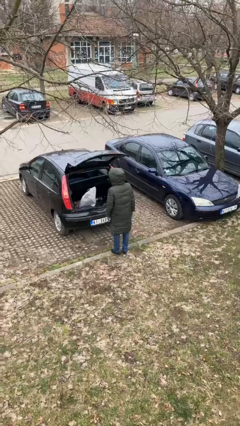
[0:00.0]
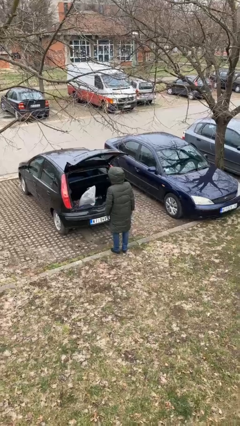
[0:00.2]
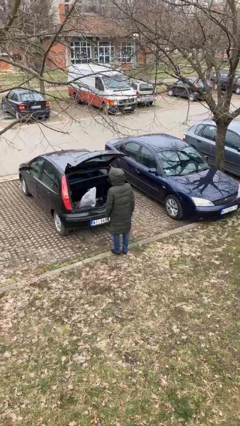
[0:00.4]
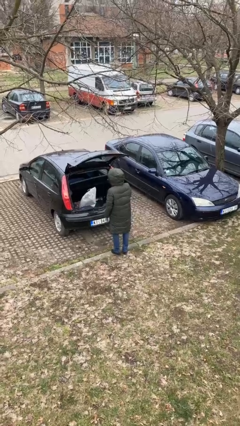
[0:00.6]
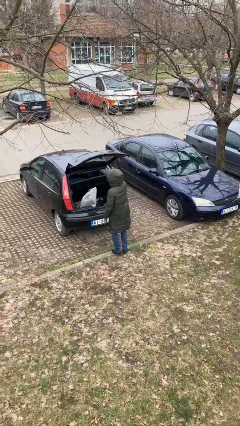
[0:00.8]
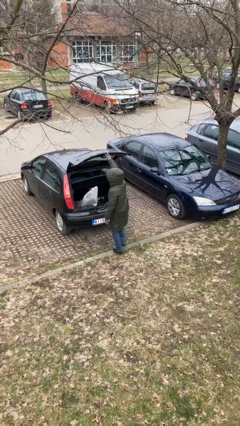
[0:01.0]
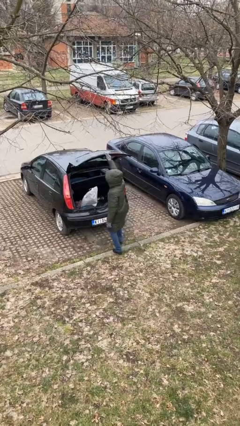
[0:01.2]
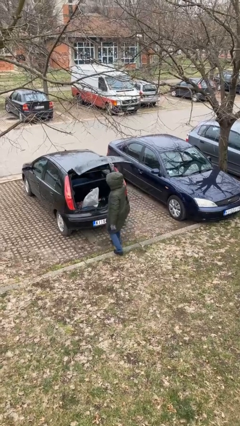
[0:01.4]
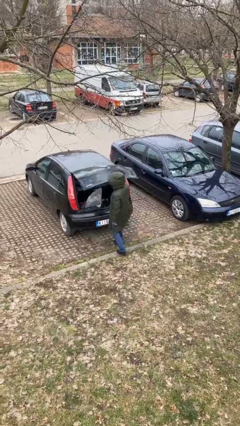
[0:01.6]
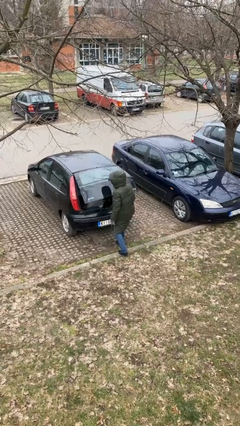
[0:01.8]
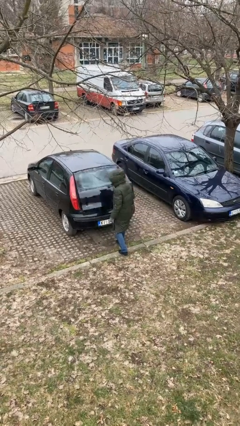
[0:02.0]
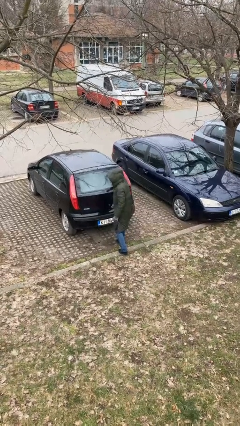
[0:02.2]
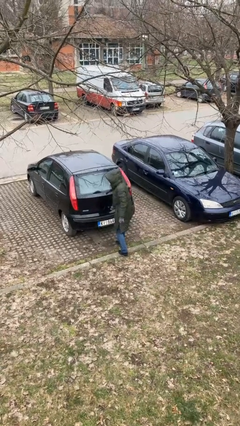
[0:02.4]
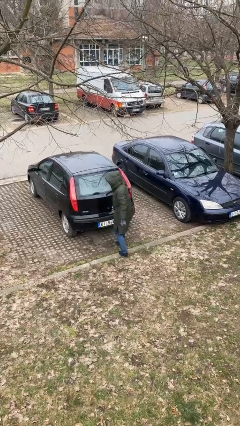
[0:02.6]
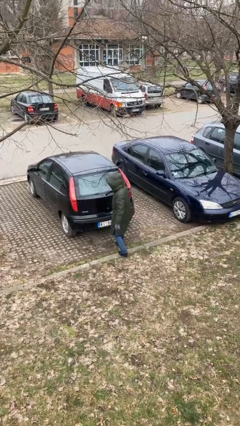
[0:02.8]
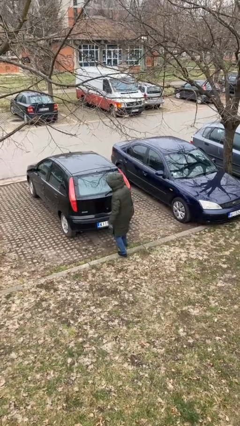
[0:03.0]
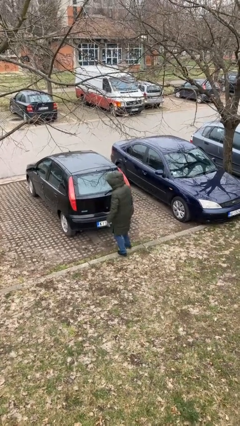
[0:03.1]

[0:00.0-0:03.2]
person closes car trunk

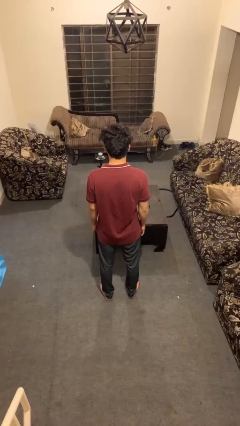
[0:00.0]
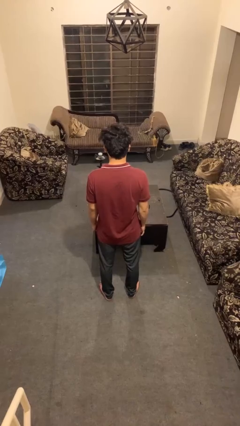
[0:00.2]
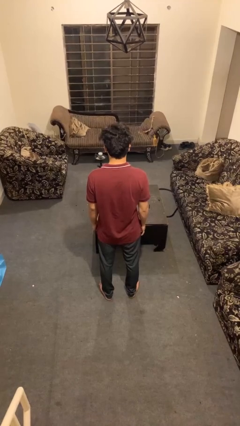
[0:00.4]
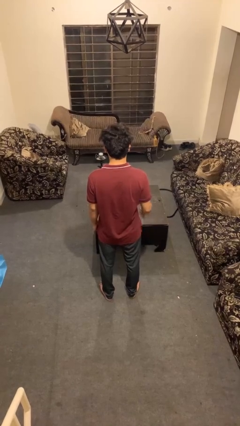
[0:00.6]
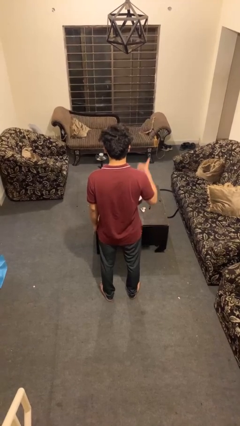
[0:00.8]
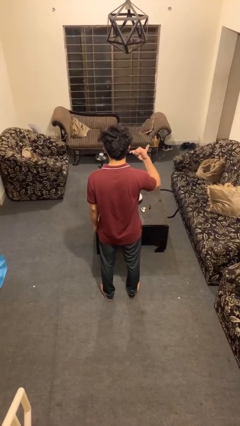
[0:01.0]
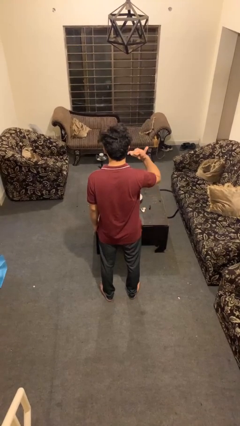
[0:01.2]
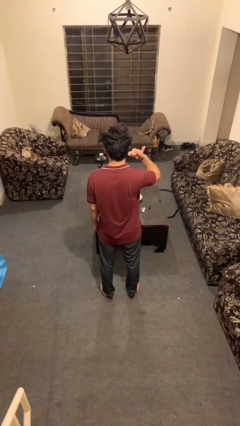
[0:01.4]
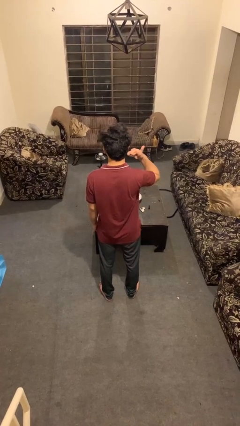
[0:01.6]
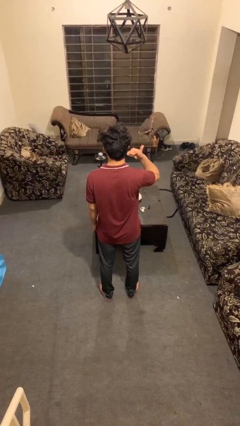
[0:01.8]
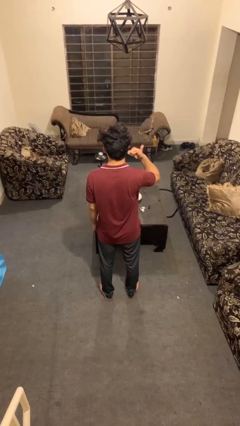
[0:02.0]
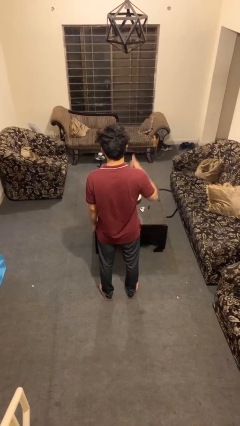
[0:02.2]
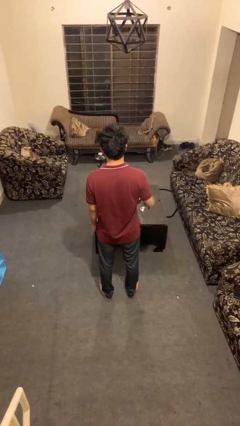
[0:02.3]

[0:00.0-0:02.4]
person gestures call me

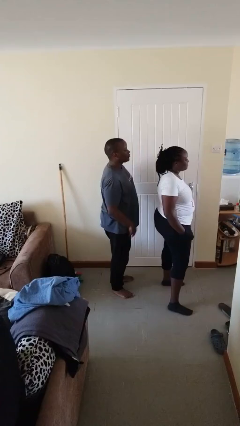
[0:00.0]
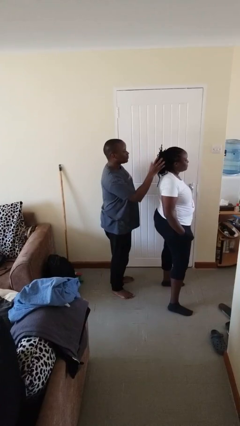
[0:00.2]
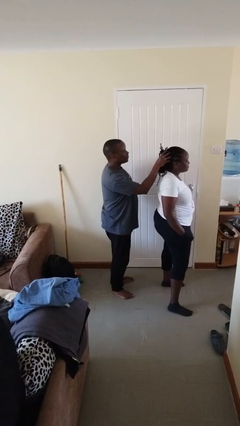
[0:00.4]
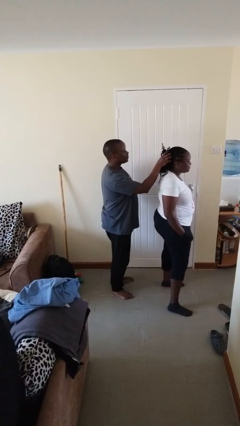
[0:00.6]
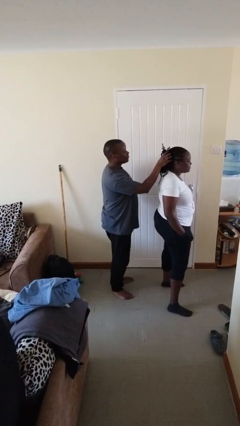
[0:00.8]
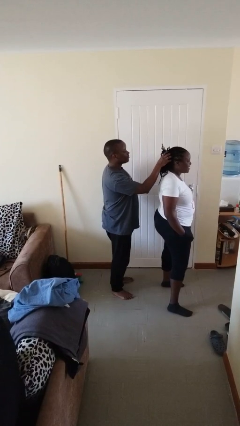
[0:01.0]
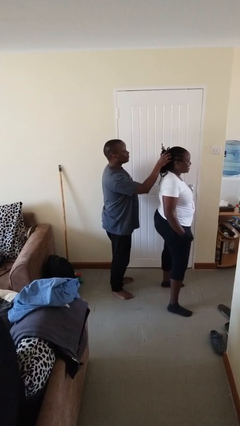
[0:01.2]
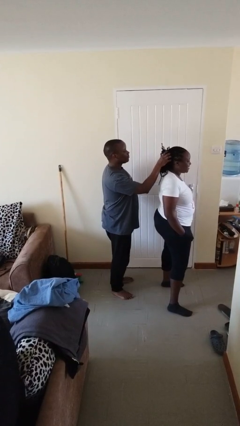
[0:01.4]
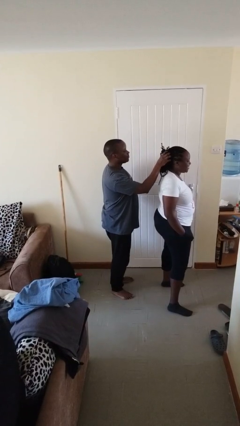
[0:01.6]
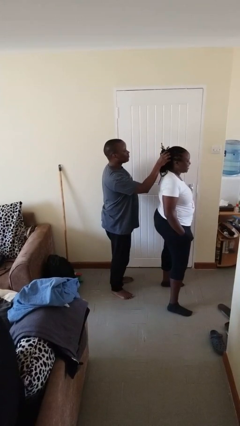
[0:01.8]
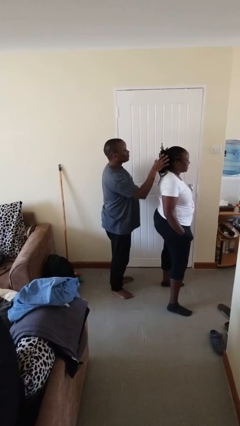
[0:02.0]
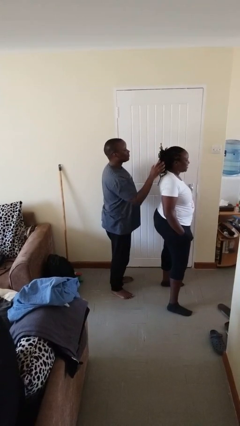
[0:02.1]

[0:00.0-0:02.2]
person grabs person by hair

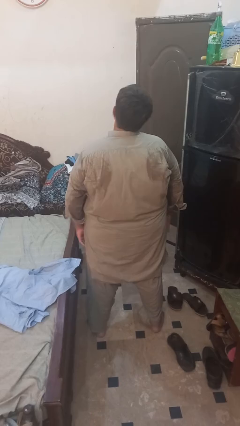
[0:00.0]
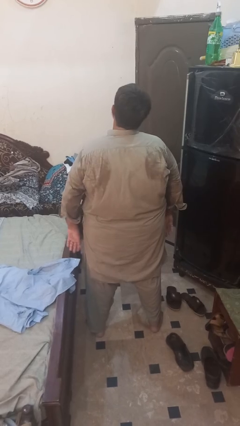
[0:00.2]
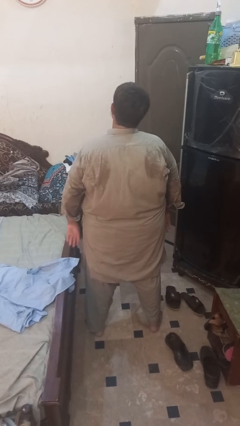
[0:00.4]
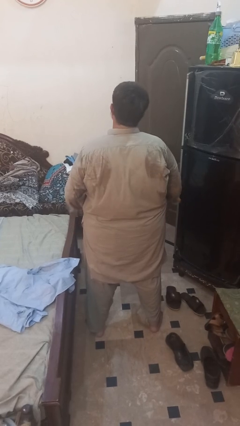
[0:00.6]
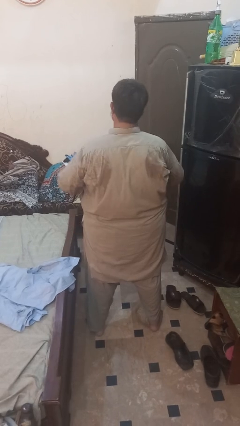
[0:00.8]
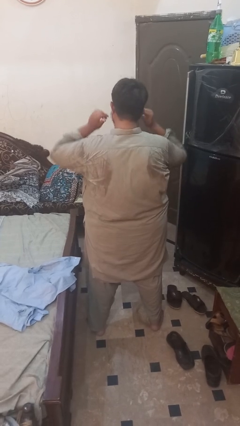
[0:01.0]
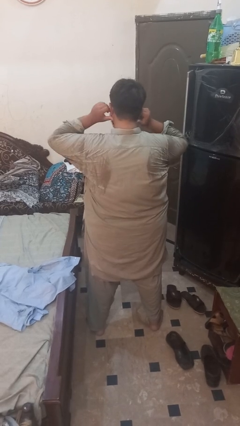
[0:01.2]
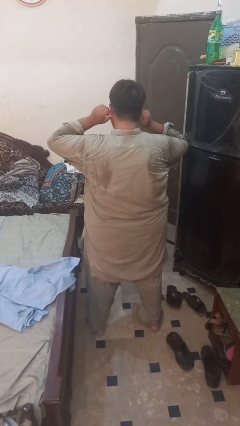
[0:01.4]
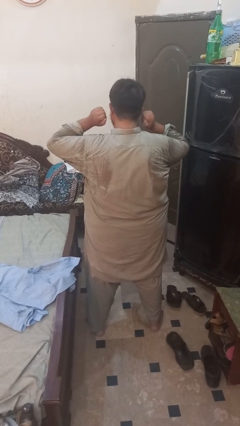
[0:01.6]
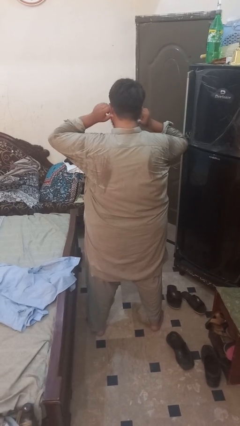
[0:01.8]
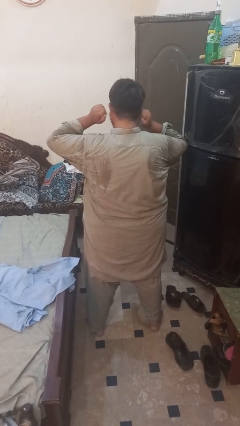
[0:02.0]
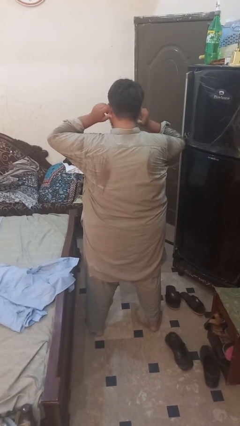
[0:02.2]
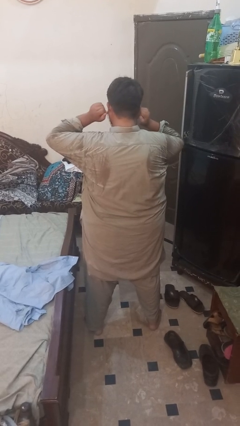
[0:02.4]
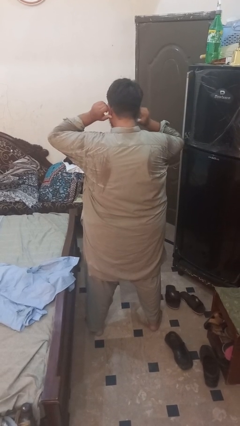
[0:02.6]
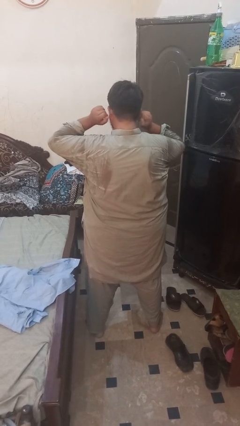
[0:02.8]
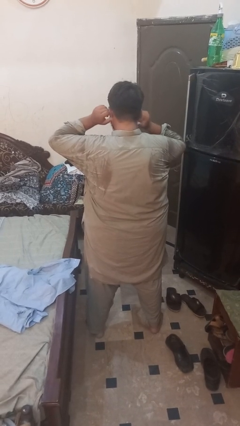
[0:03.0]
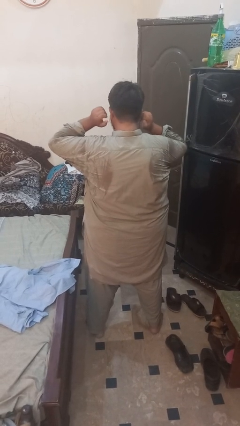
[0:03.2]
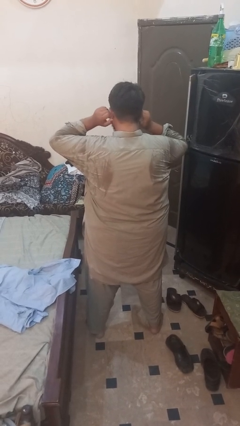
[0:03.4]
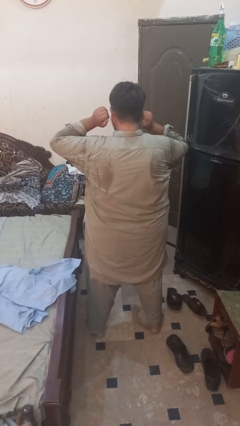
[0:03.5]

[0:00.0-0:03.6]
person touches earlobe

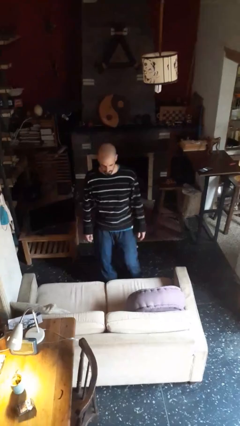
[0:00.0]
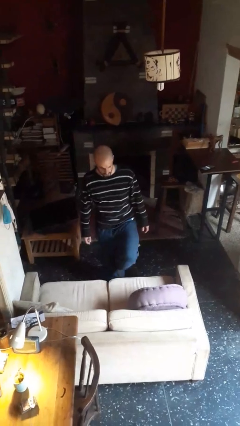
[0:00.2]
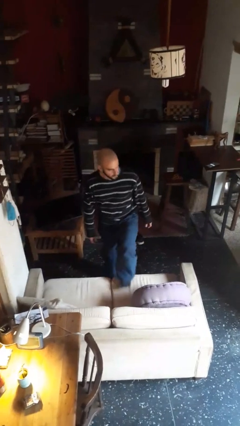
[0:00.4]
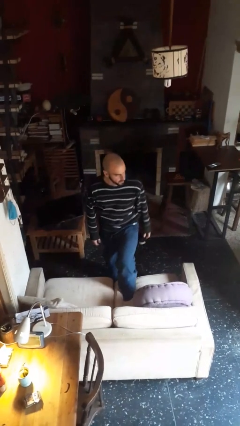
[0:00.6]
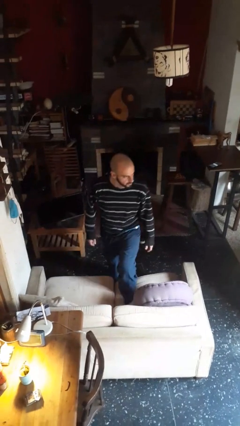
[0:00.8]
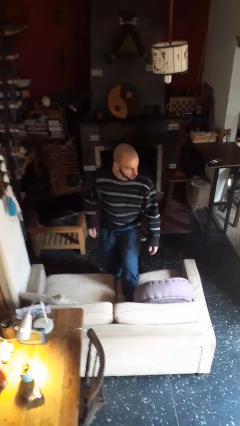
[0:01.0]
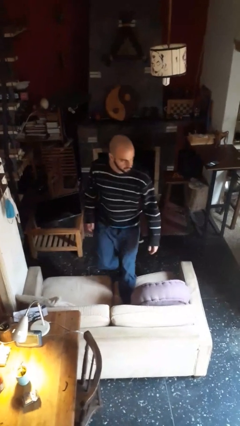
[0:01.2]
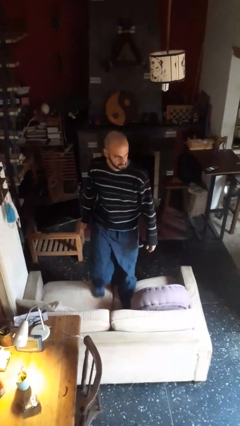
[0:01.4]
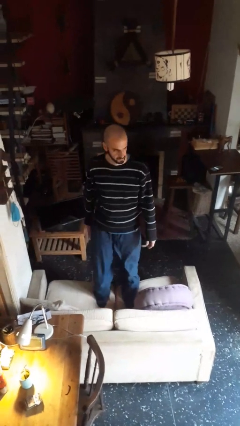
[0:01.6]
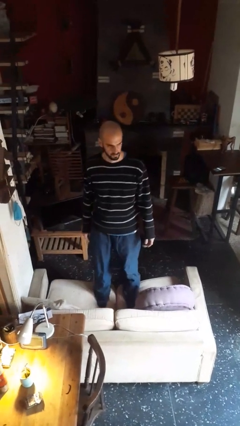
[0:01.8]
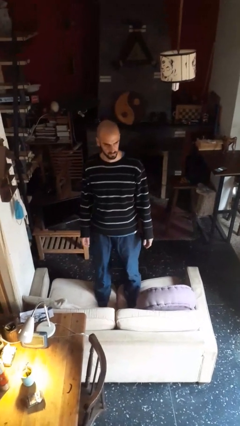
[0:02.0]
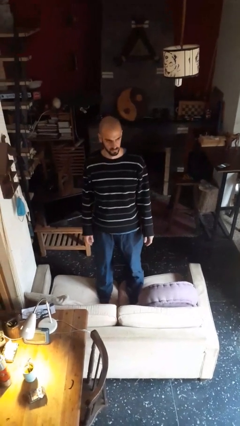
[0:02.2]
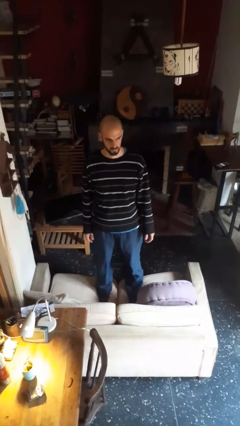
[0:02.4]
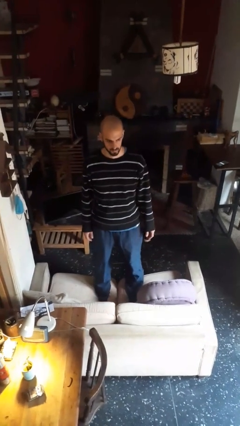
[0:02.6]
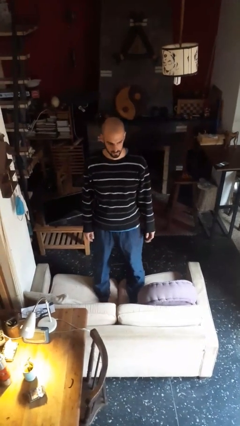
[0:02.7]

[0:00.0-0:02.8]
person climbs on couch

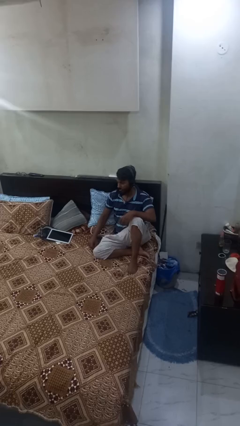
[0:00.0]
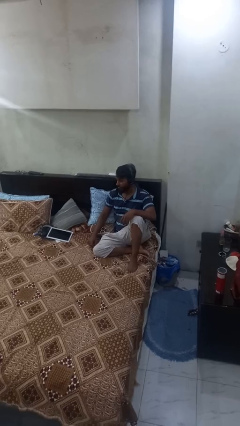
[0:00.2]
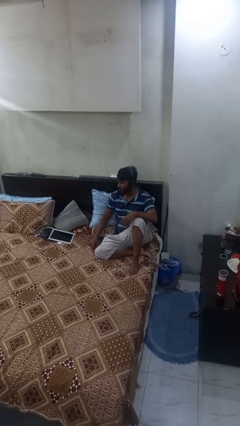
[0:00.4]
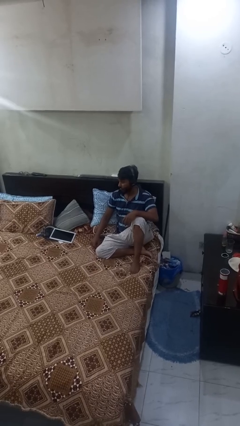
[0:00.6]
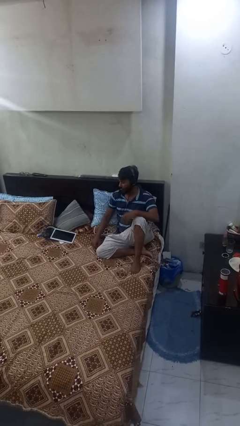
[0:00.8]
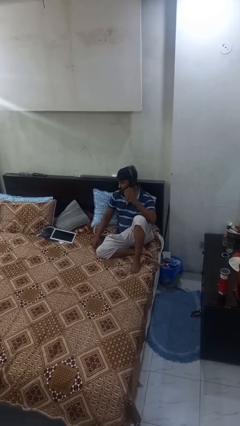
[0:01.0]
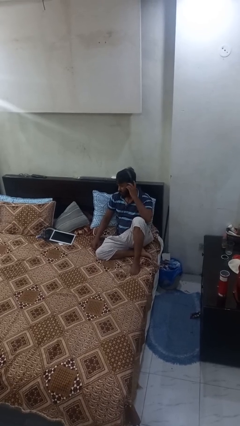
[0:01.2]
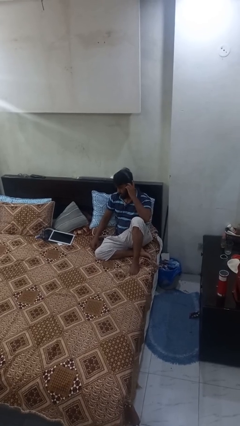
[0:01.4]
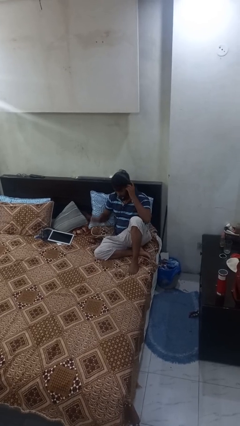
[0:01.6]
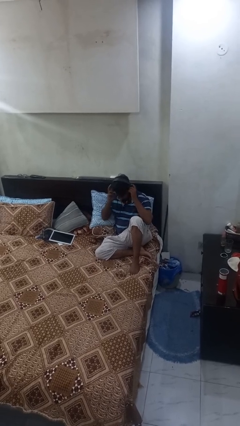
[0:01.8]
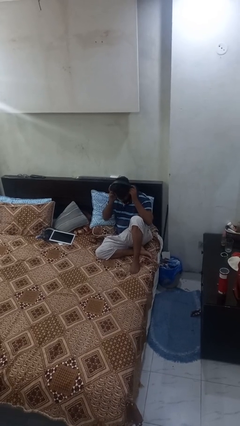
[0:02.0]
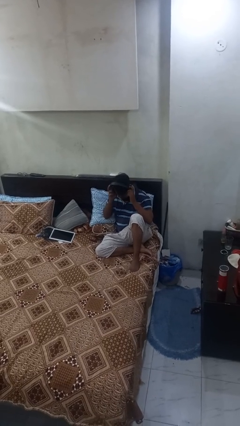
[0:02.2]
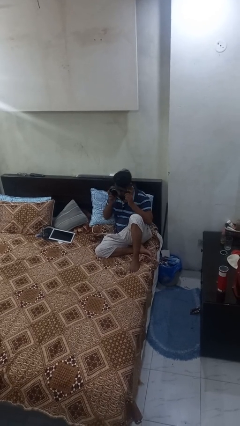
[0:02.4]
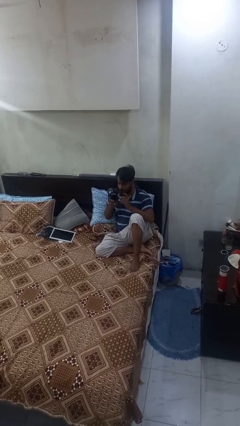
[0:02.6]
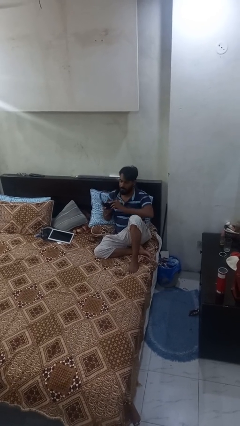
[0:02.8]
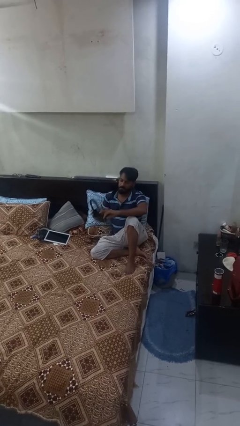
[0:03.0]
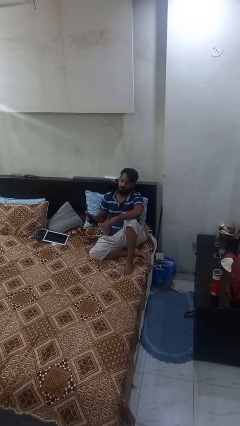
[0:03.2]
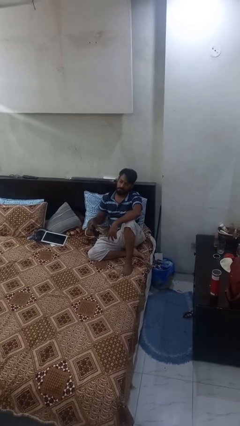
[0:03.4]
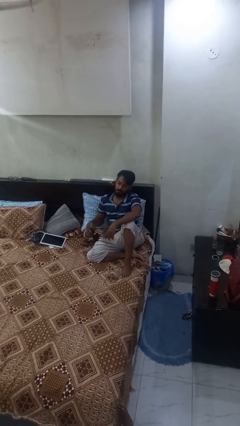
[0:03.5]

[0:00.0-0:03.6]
person takes off headphones
